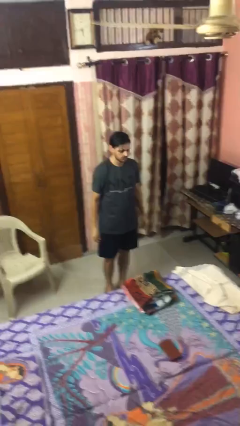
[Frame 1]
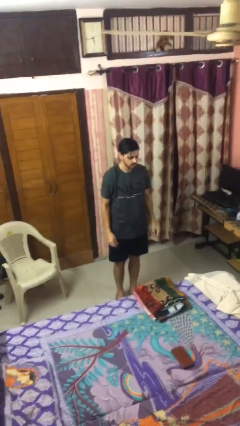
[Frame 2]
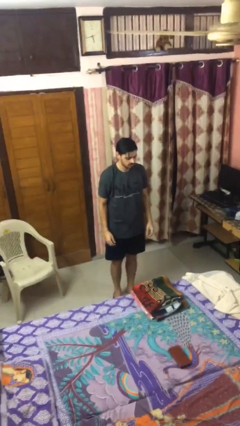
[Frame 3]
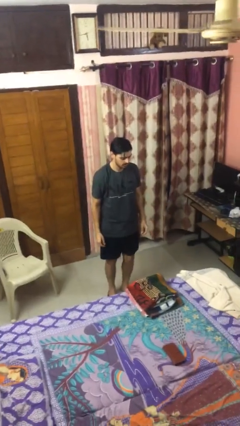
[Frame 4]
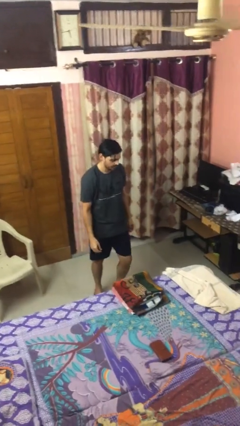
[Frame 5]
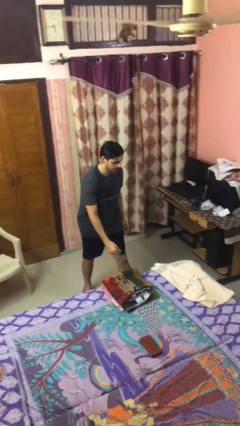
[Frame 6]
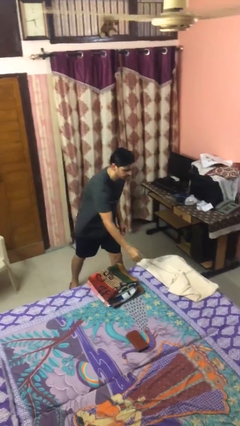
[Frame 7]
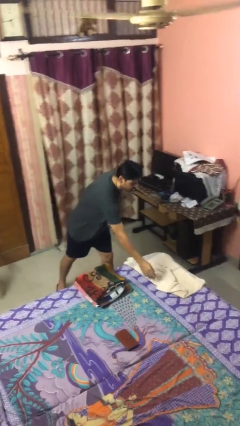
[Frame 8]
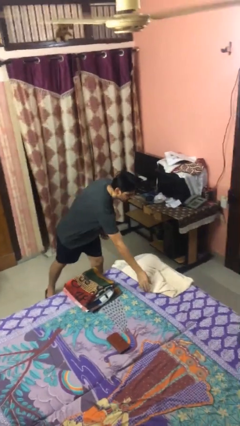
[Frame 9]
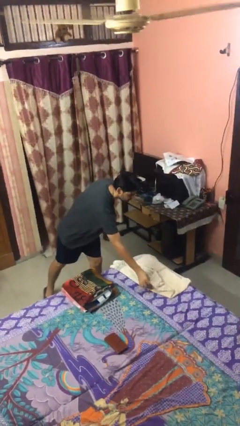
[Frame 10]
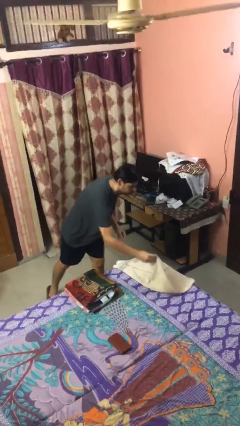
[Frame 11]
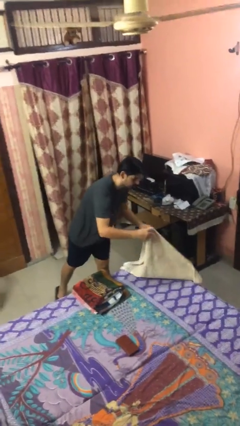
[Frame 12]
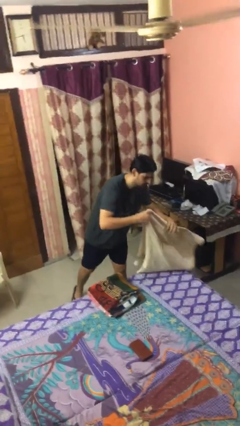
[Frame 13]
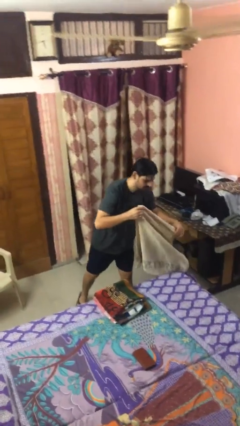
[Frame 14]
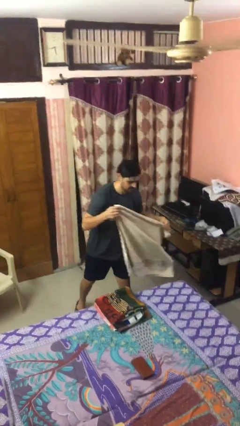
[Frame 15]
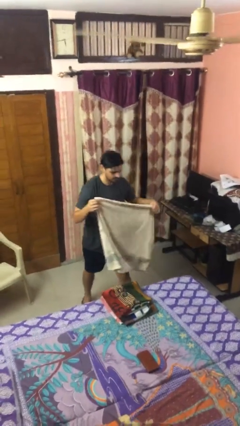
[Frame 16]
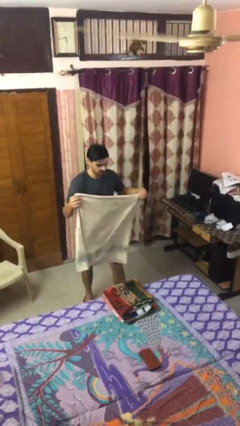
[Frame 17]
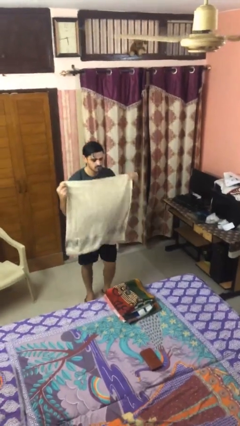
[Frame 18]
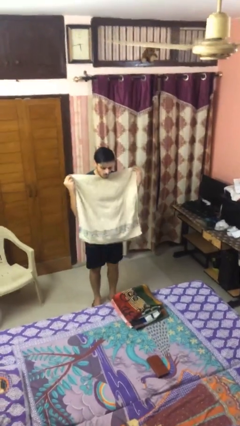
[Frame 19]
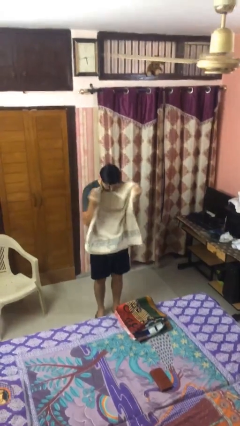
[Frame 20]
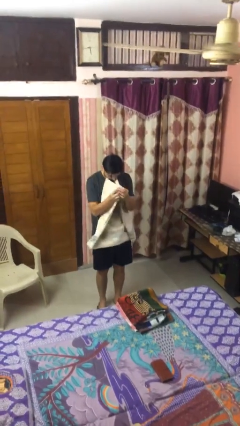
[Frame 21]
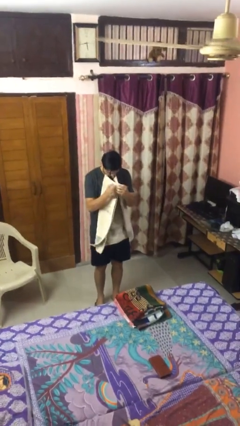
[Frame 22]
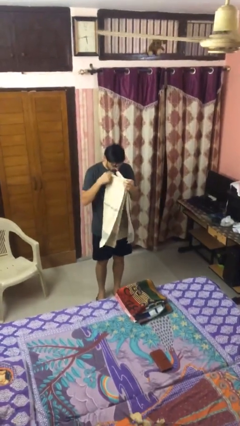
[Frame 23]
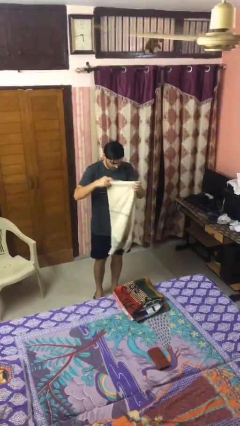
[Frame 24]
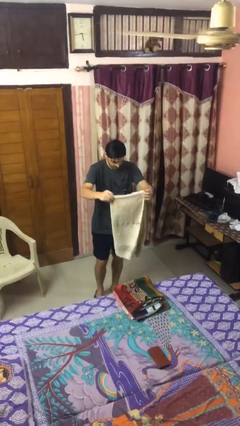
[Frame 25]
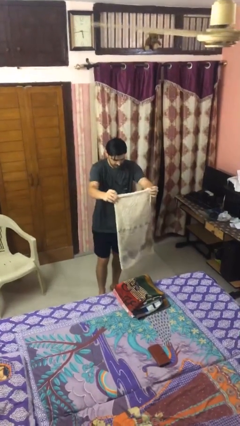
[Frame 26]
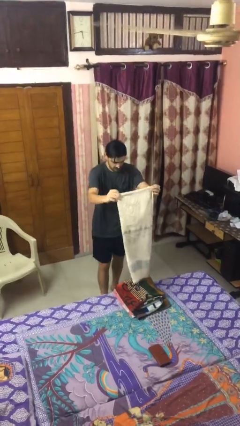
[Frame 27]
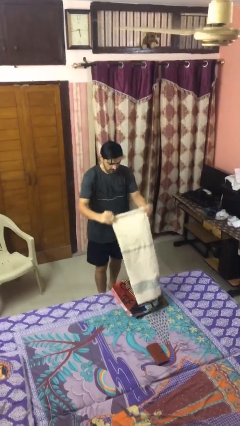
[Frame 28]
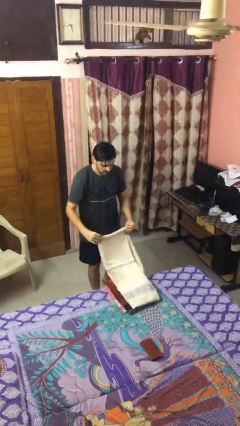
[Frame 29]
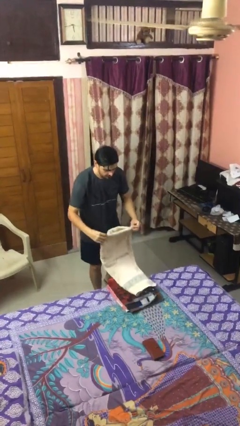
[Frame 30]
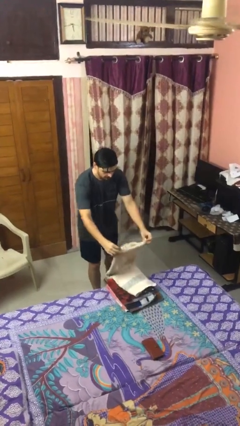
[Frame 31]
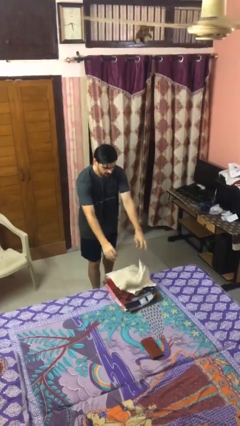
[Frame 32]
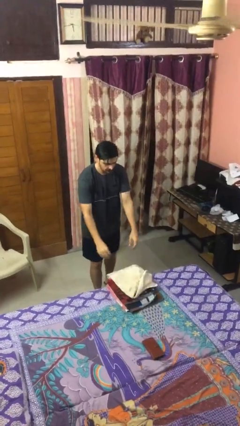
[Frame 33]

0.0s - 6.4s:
person folds towel

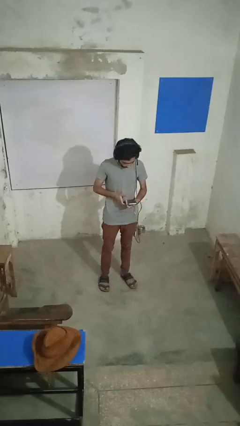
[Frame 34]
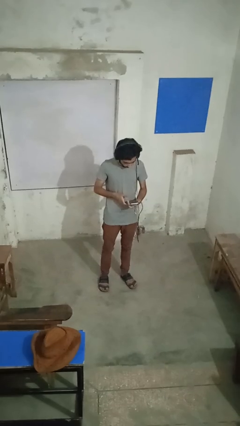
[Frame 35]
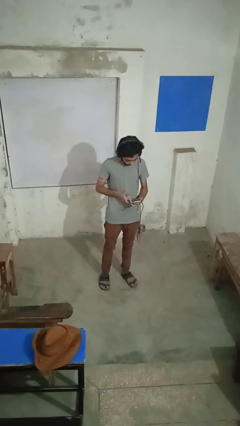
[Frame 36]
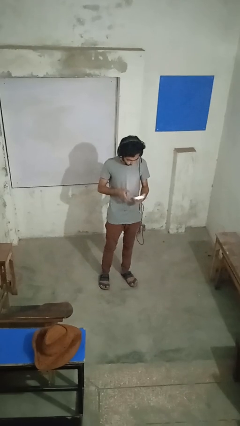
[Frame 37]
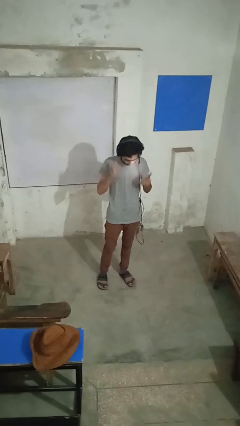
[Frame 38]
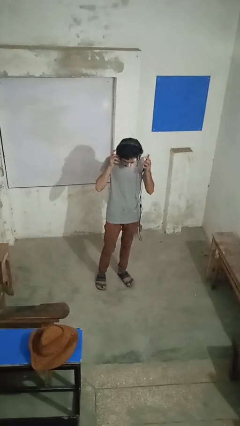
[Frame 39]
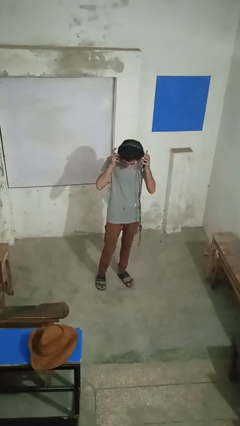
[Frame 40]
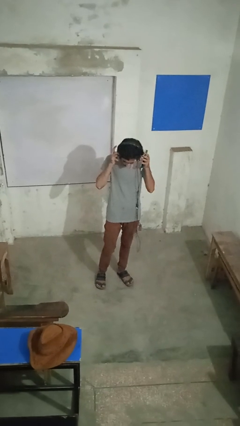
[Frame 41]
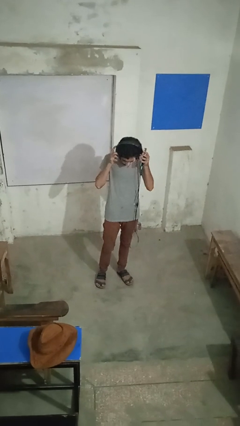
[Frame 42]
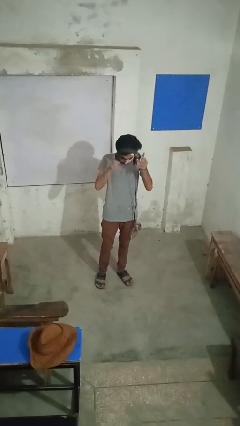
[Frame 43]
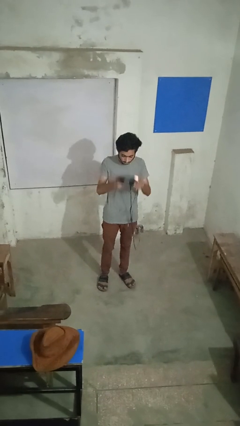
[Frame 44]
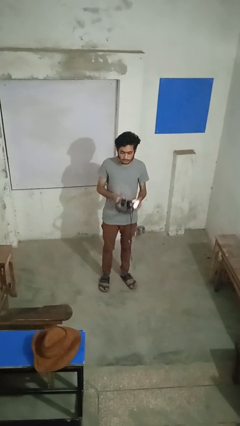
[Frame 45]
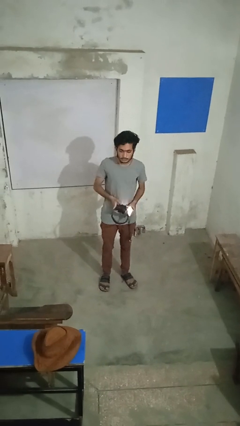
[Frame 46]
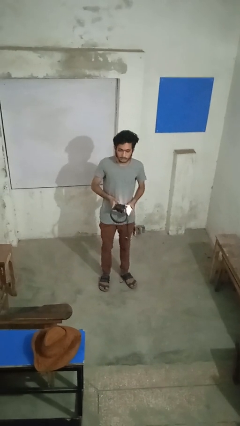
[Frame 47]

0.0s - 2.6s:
person takes off headphones

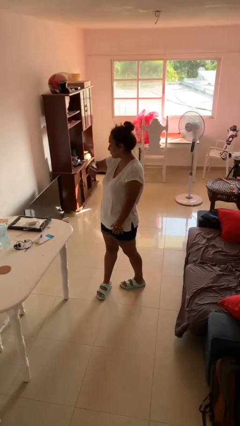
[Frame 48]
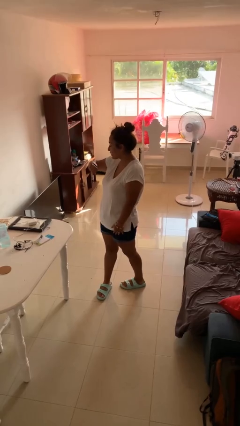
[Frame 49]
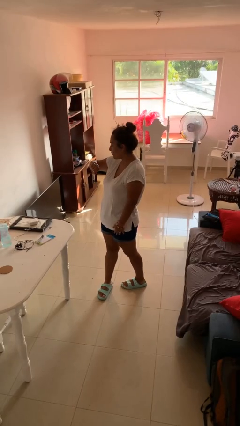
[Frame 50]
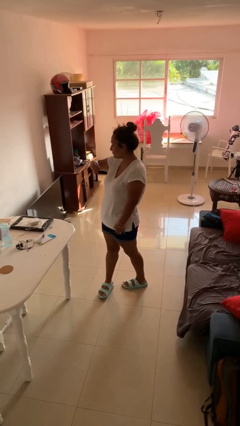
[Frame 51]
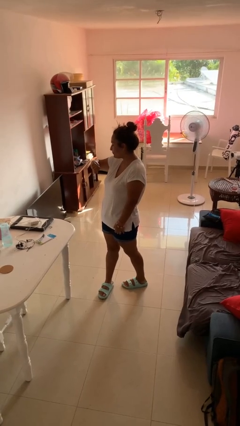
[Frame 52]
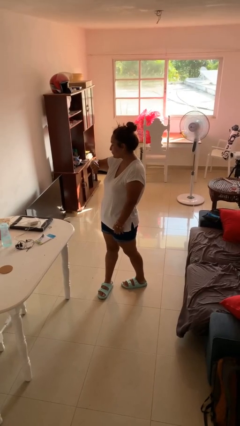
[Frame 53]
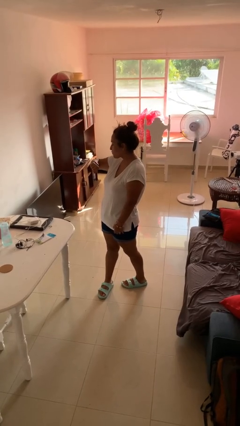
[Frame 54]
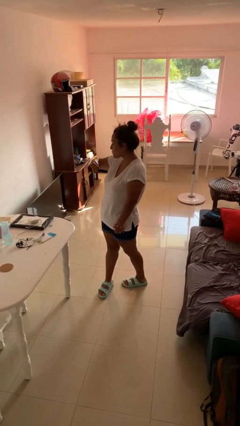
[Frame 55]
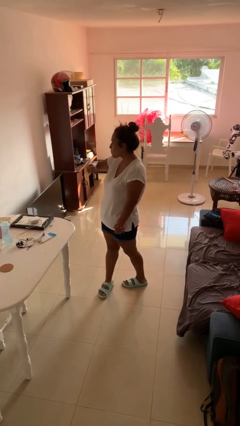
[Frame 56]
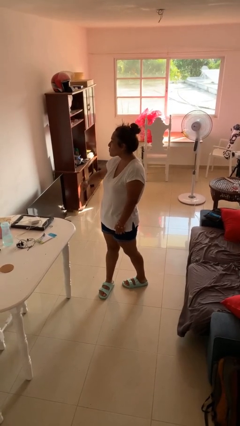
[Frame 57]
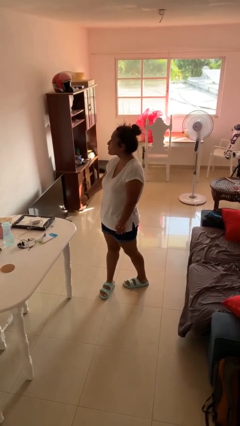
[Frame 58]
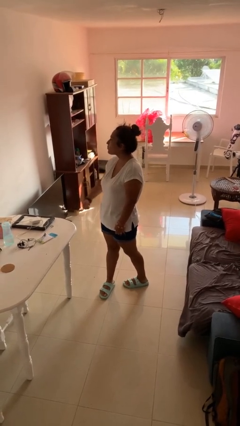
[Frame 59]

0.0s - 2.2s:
person looks at wristwatch

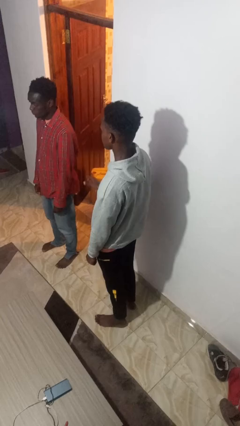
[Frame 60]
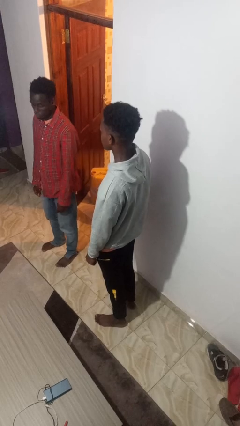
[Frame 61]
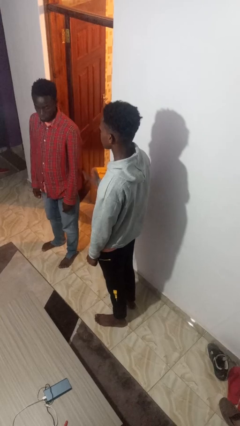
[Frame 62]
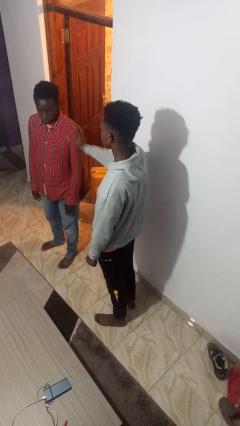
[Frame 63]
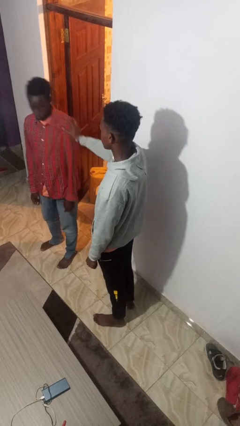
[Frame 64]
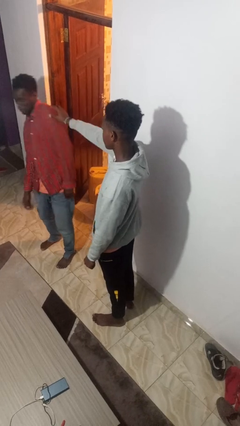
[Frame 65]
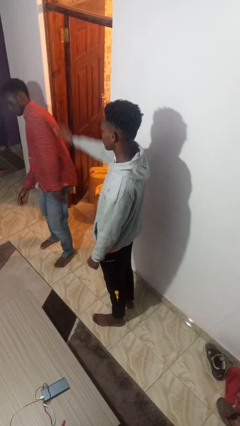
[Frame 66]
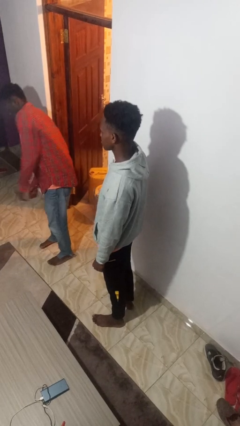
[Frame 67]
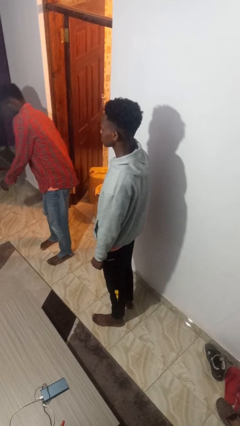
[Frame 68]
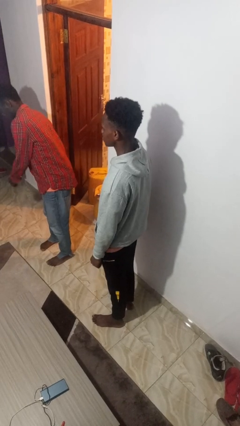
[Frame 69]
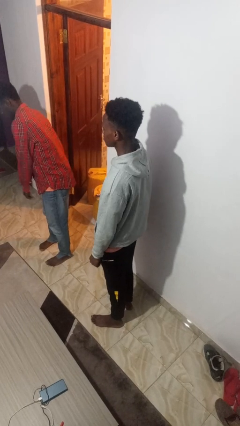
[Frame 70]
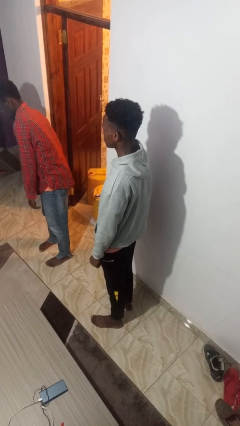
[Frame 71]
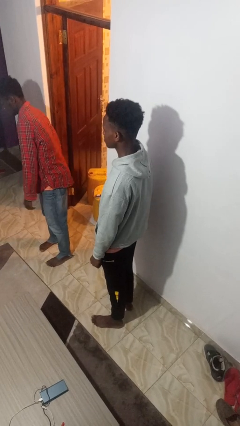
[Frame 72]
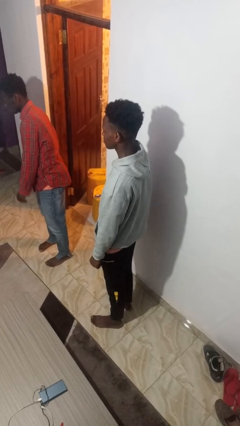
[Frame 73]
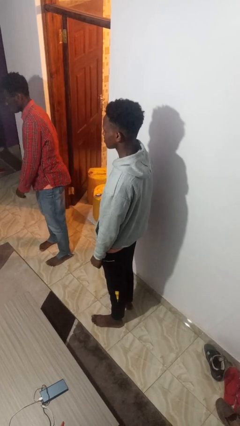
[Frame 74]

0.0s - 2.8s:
person shoves person

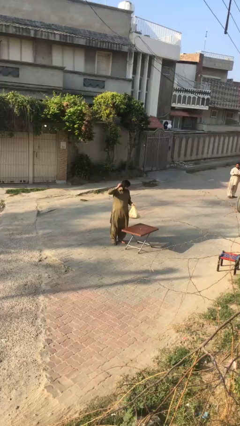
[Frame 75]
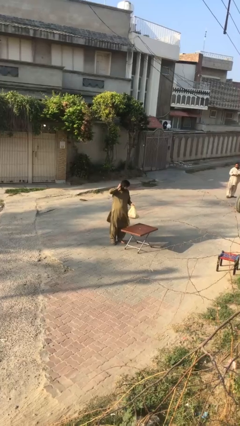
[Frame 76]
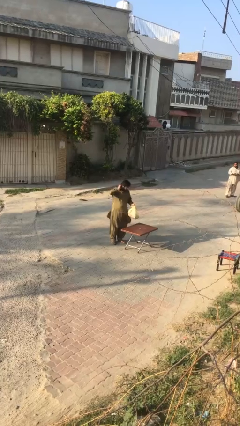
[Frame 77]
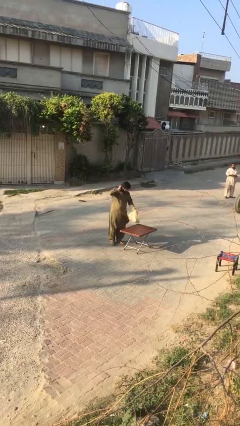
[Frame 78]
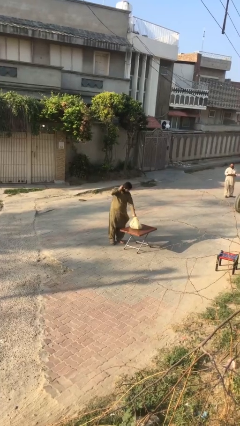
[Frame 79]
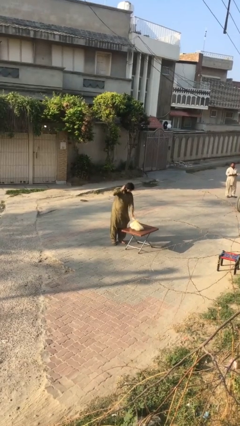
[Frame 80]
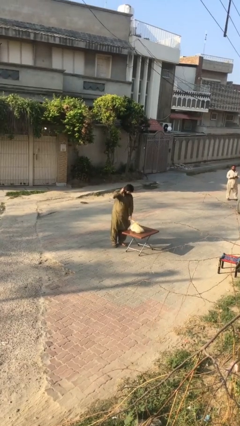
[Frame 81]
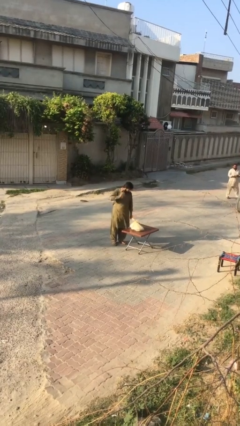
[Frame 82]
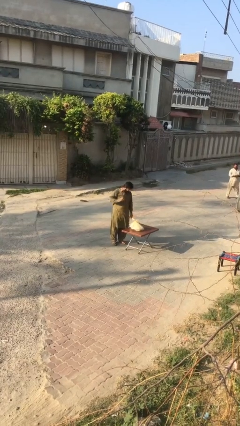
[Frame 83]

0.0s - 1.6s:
person puts down object on table

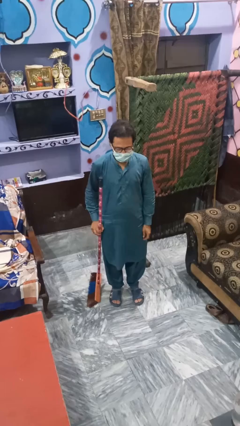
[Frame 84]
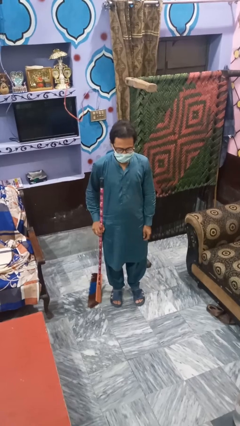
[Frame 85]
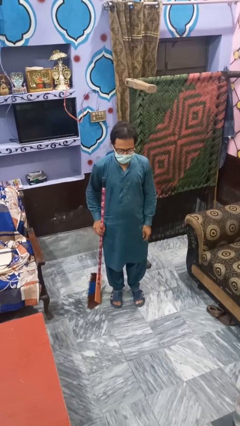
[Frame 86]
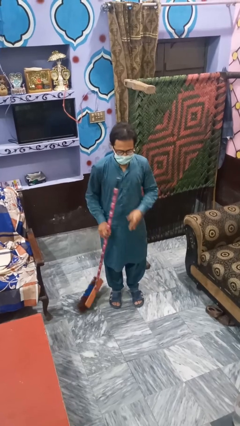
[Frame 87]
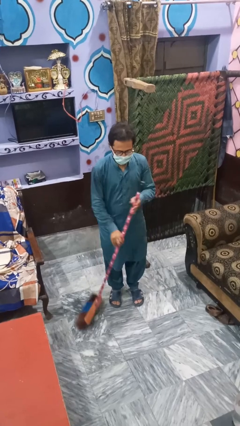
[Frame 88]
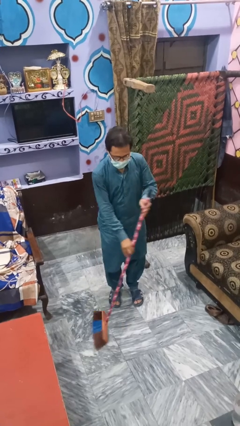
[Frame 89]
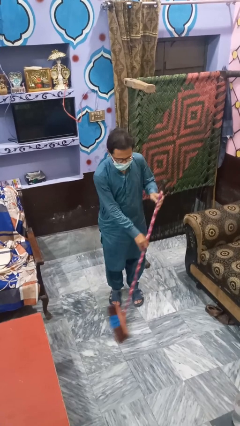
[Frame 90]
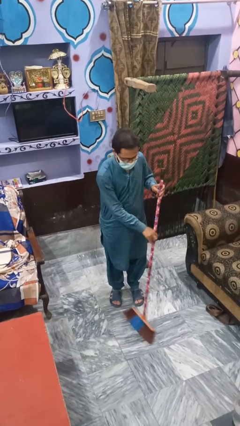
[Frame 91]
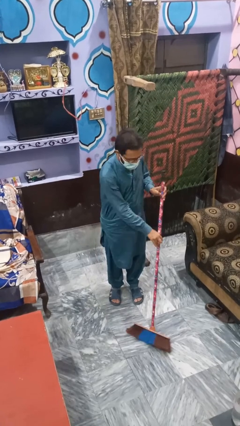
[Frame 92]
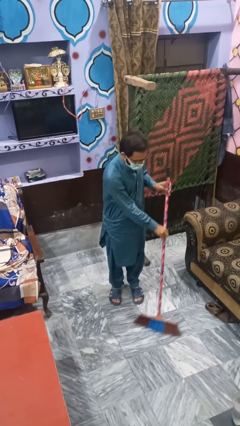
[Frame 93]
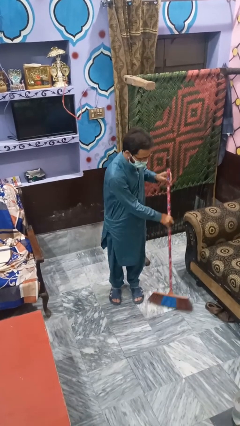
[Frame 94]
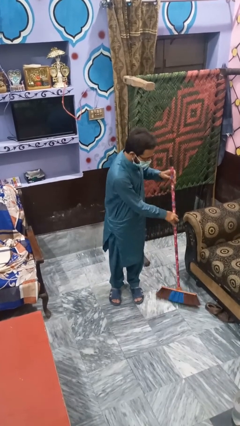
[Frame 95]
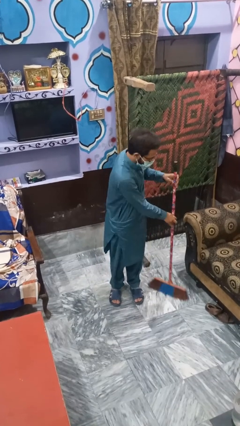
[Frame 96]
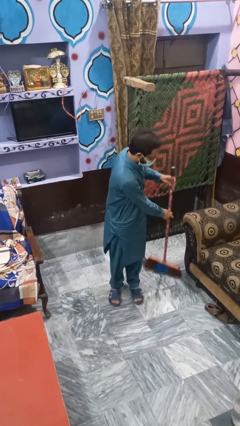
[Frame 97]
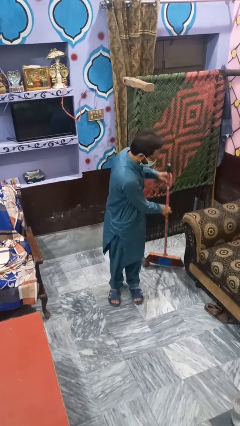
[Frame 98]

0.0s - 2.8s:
person mops
